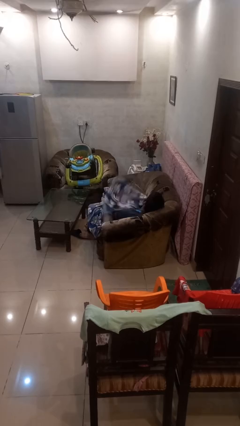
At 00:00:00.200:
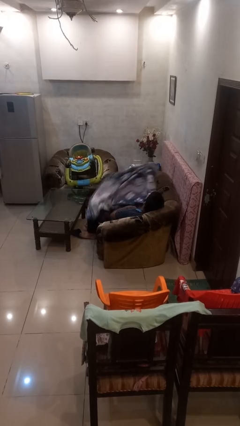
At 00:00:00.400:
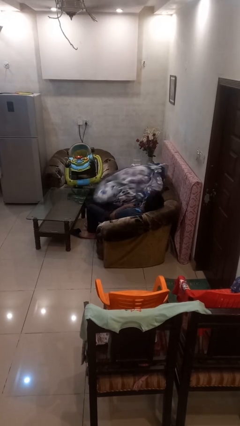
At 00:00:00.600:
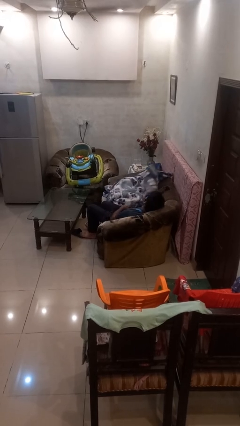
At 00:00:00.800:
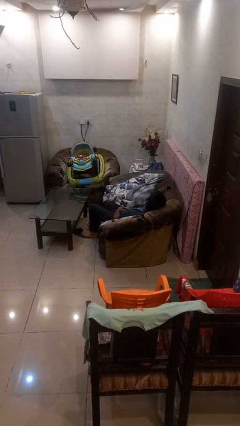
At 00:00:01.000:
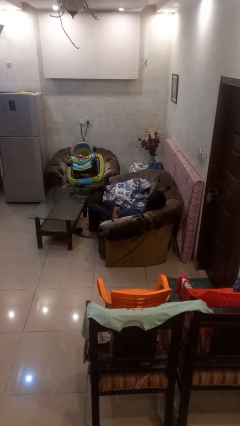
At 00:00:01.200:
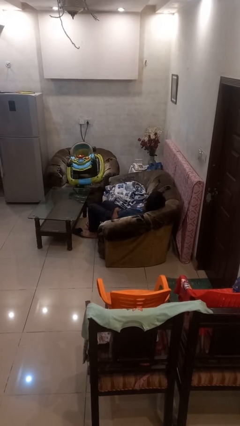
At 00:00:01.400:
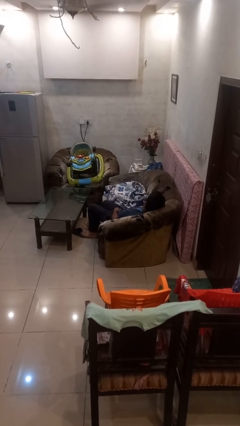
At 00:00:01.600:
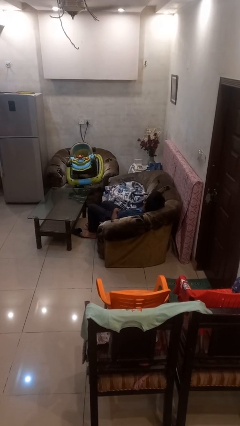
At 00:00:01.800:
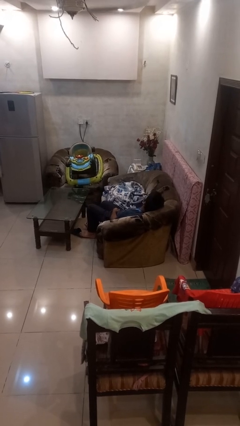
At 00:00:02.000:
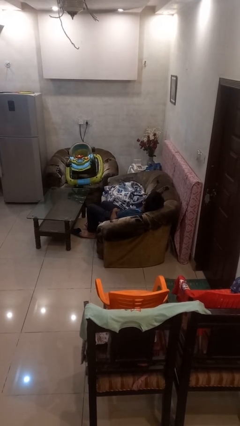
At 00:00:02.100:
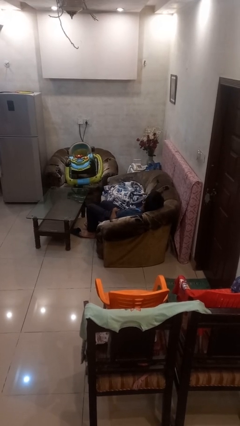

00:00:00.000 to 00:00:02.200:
person uncovers with blanket

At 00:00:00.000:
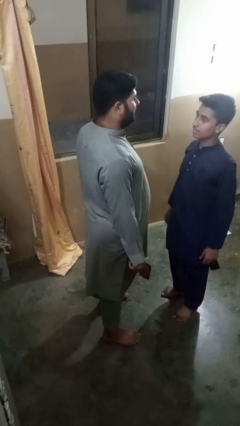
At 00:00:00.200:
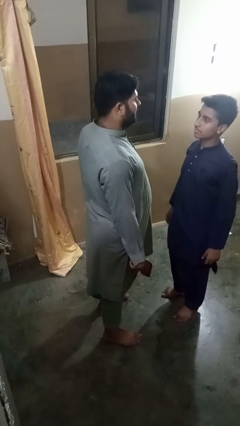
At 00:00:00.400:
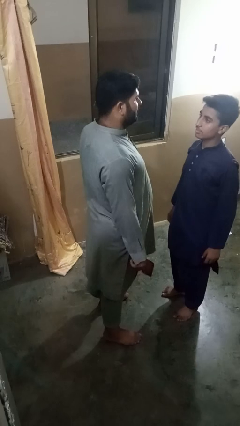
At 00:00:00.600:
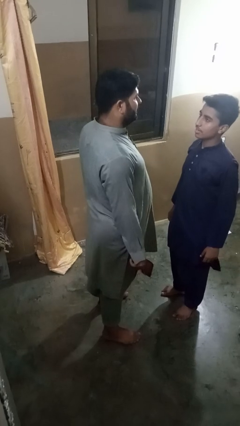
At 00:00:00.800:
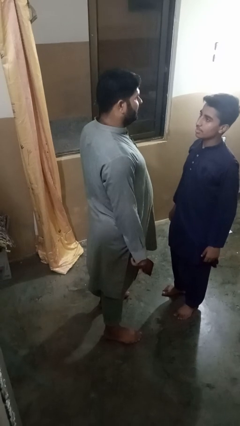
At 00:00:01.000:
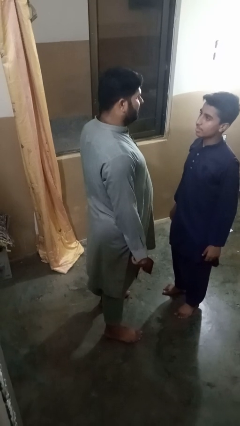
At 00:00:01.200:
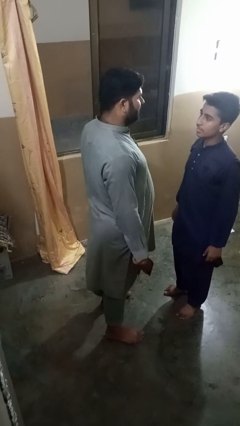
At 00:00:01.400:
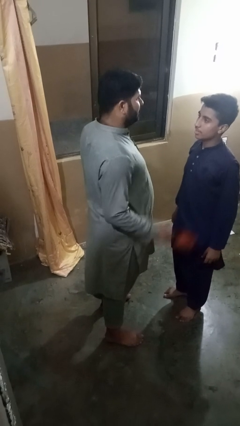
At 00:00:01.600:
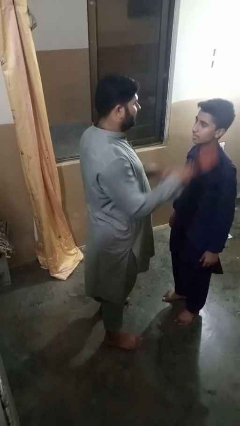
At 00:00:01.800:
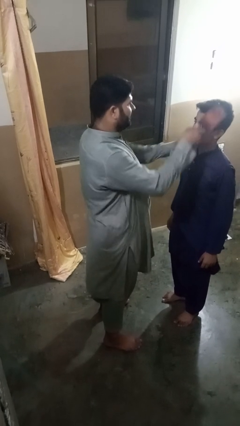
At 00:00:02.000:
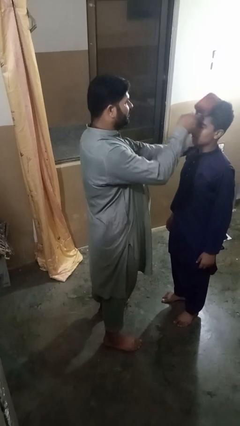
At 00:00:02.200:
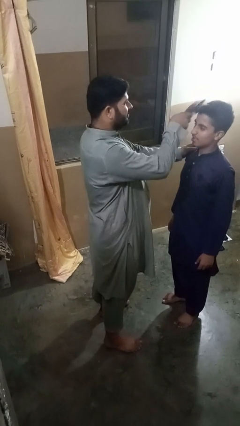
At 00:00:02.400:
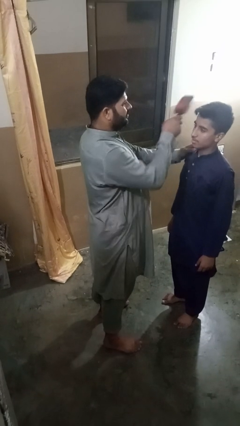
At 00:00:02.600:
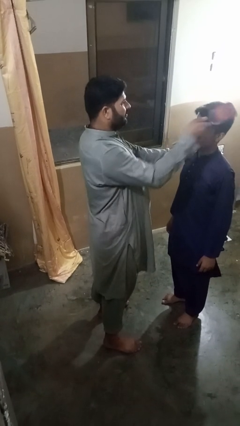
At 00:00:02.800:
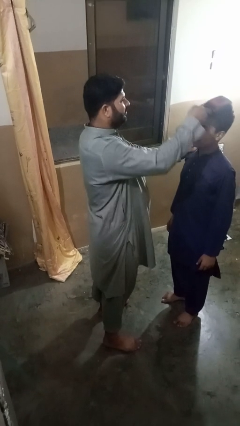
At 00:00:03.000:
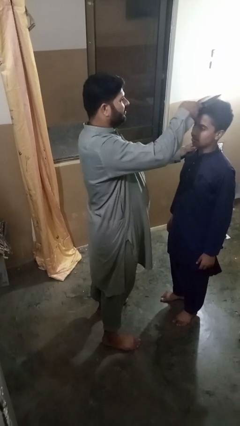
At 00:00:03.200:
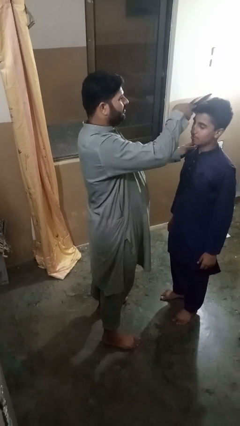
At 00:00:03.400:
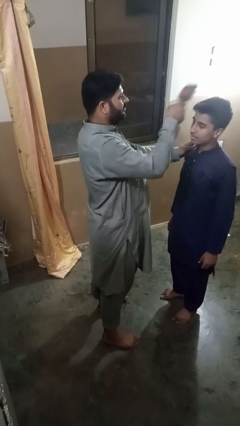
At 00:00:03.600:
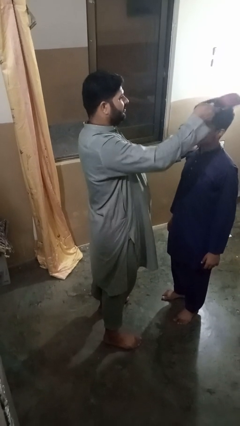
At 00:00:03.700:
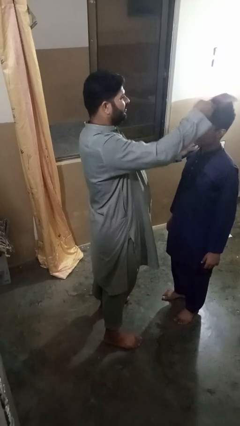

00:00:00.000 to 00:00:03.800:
person brushes hair of person

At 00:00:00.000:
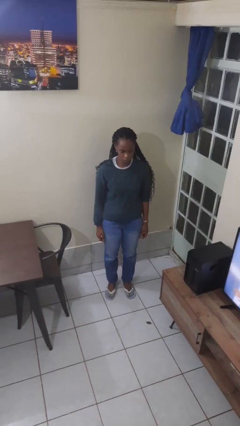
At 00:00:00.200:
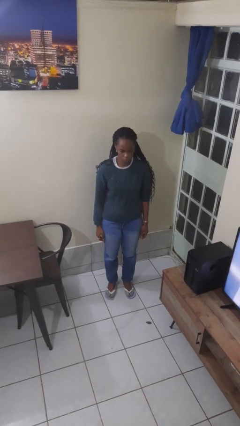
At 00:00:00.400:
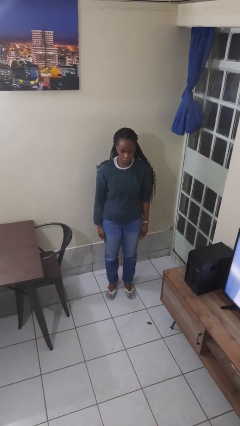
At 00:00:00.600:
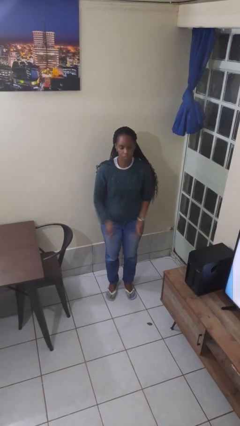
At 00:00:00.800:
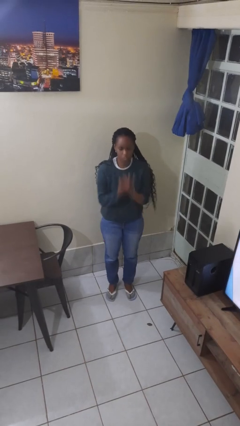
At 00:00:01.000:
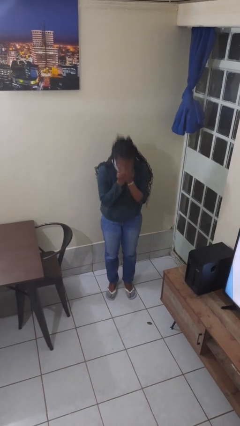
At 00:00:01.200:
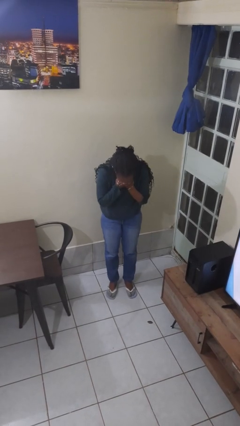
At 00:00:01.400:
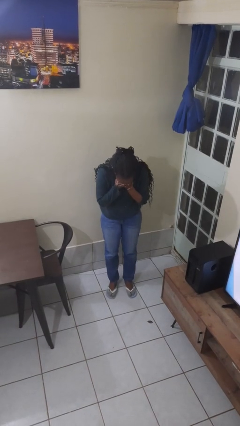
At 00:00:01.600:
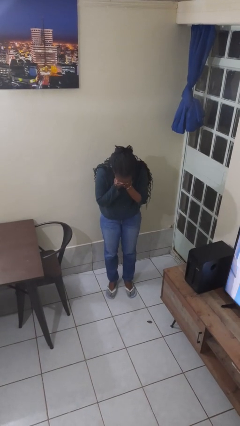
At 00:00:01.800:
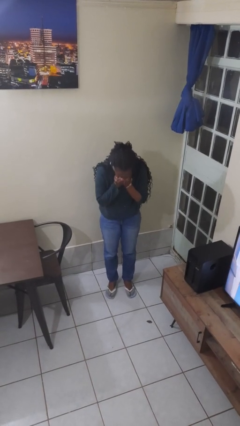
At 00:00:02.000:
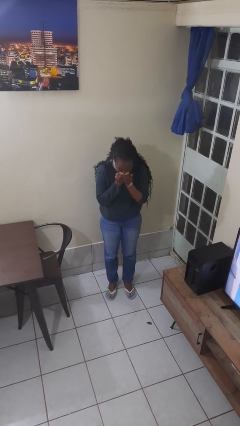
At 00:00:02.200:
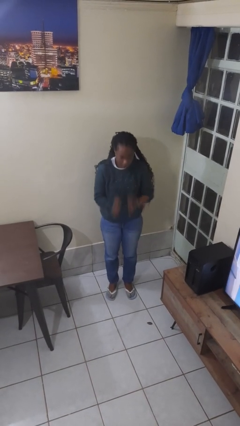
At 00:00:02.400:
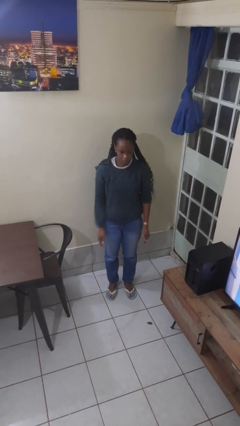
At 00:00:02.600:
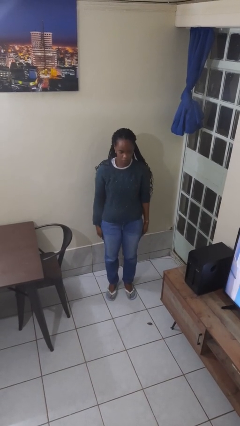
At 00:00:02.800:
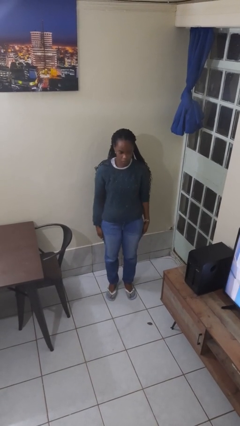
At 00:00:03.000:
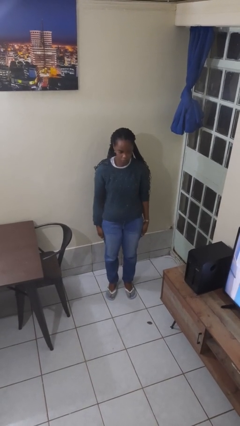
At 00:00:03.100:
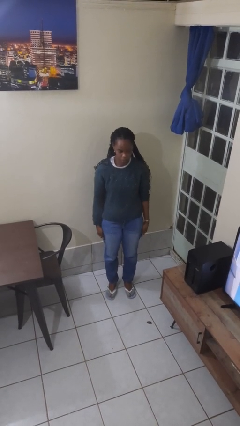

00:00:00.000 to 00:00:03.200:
person sneezes into hand

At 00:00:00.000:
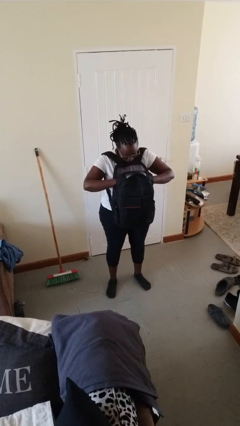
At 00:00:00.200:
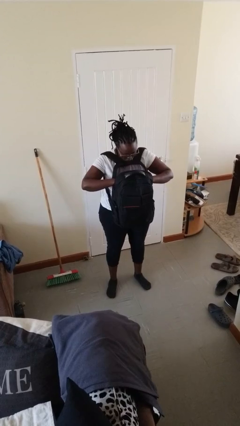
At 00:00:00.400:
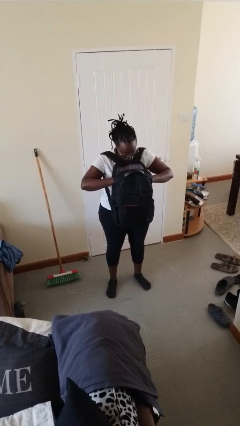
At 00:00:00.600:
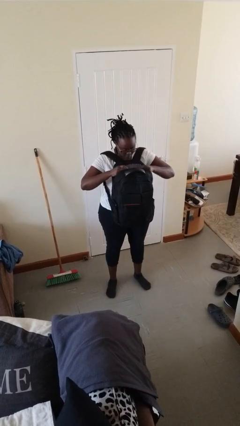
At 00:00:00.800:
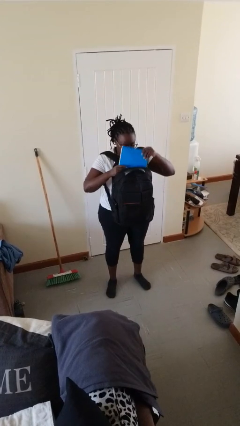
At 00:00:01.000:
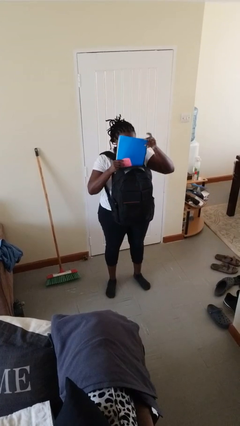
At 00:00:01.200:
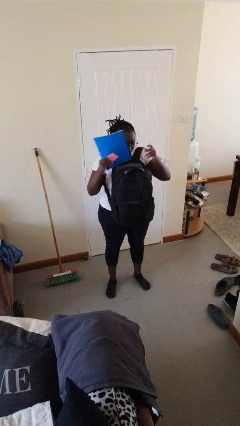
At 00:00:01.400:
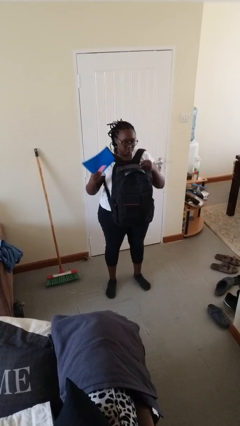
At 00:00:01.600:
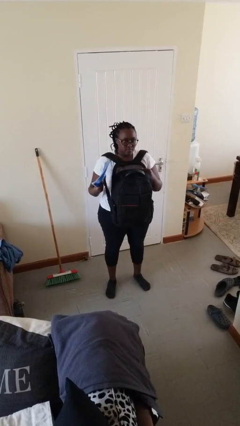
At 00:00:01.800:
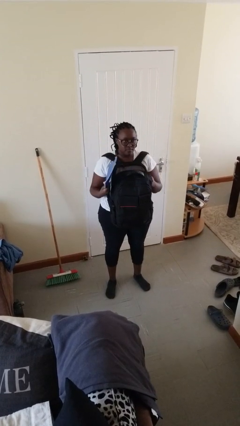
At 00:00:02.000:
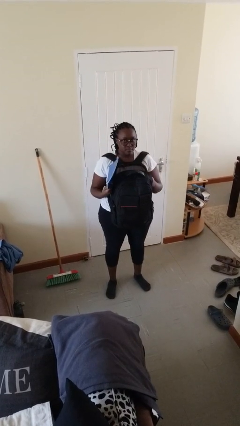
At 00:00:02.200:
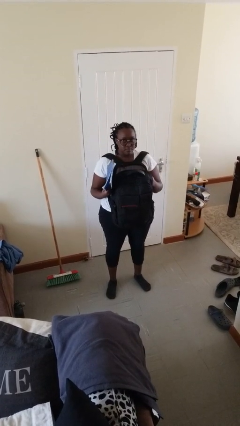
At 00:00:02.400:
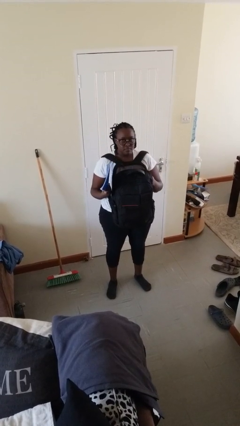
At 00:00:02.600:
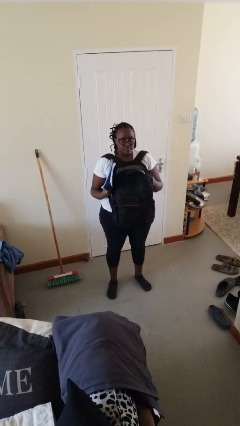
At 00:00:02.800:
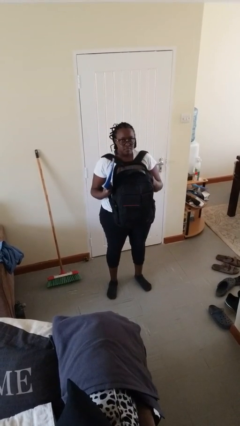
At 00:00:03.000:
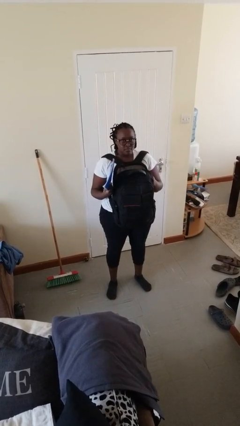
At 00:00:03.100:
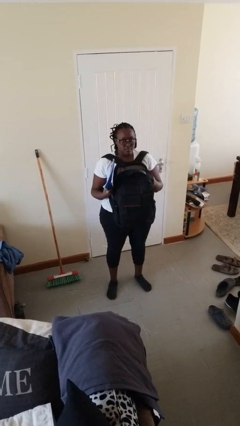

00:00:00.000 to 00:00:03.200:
person takes object from backpack

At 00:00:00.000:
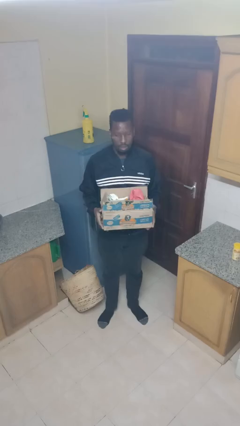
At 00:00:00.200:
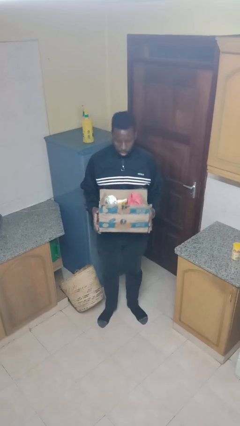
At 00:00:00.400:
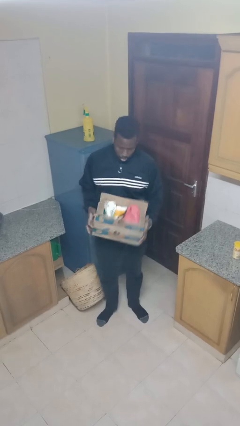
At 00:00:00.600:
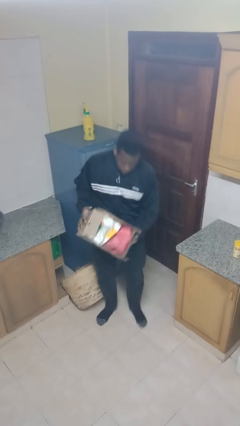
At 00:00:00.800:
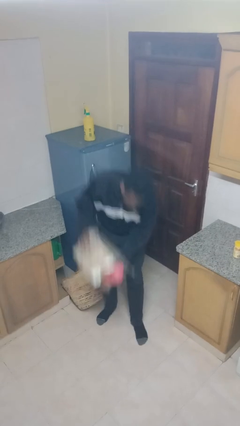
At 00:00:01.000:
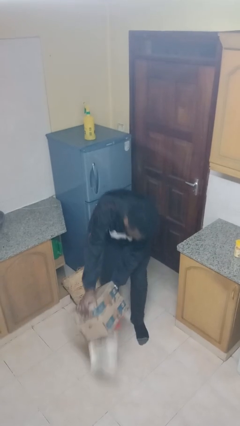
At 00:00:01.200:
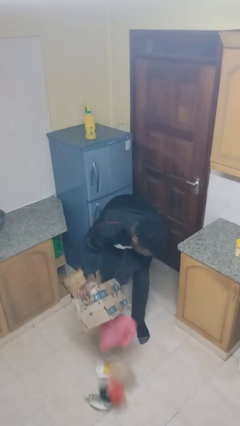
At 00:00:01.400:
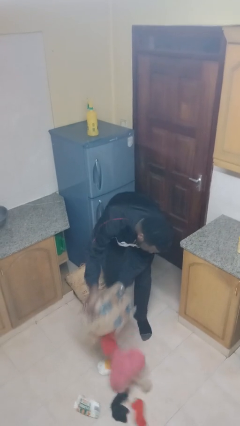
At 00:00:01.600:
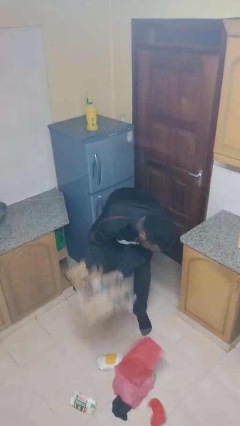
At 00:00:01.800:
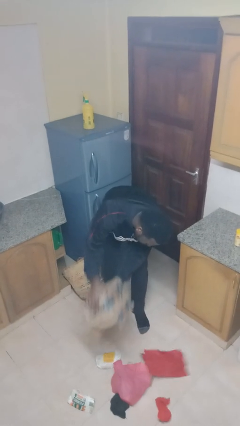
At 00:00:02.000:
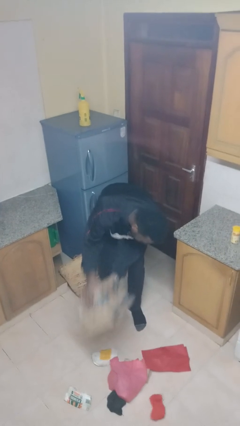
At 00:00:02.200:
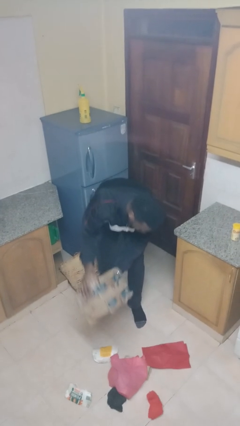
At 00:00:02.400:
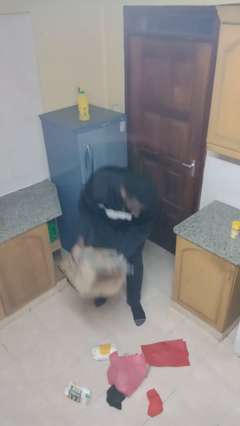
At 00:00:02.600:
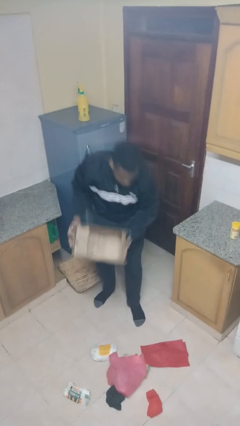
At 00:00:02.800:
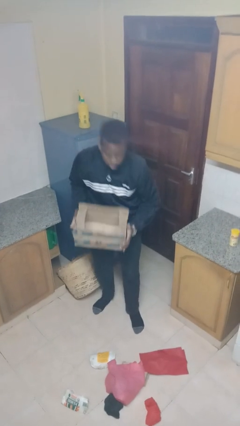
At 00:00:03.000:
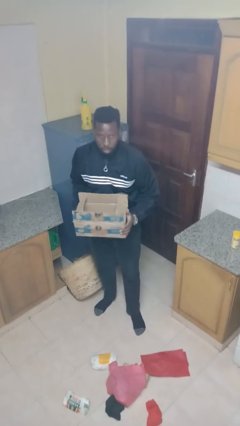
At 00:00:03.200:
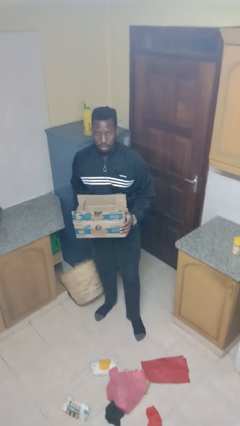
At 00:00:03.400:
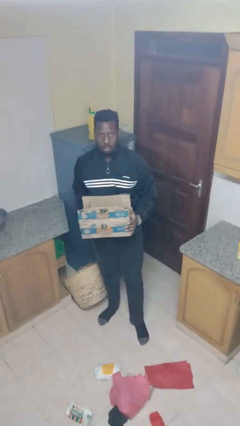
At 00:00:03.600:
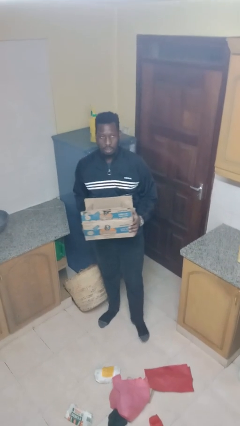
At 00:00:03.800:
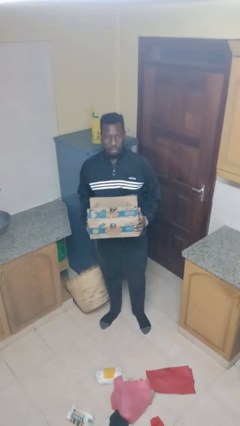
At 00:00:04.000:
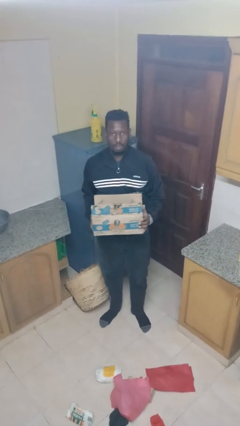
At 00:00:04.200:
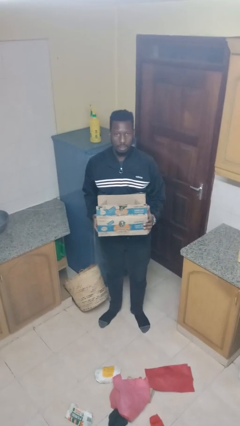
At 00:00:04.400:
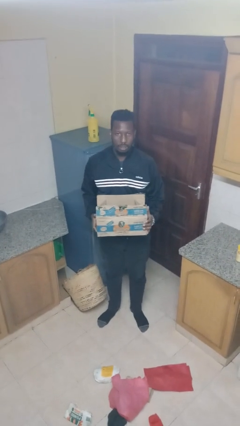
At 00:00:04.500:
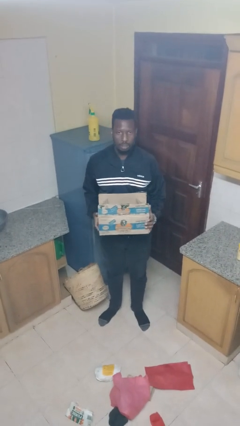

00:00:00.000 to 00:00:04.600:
person unloads box onto floor

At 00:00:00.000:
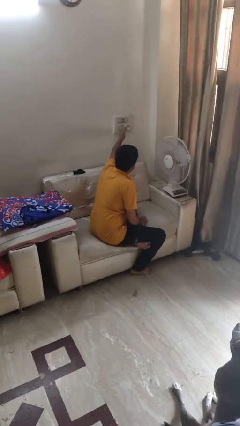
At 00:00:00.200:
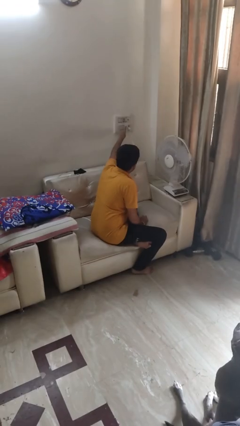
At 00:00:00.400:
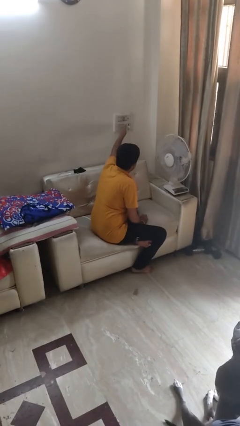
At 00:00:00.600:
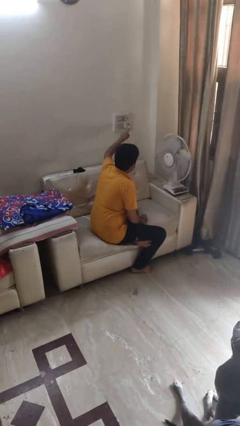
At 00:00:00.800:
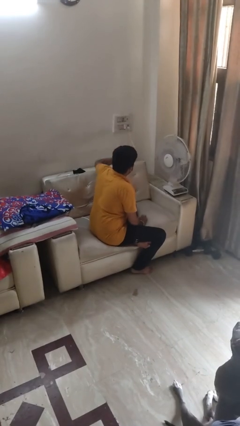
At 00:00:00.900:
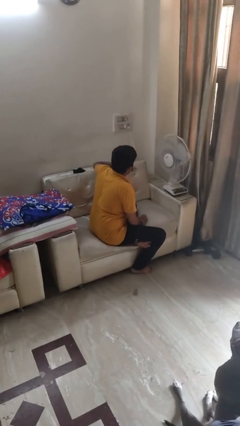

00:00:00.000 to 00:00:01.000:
person turns off fan
